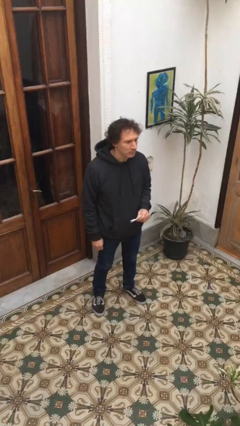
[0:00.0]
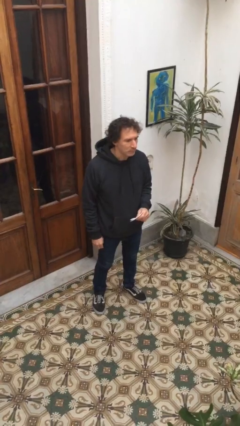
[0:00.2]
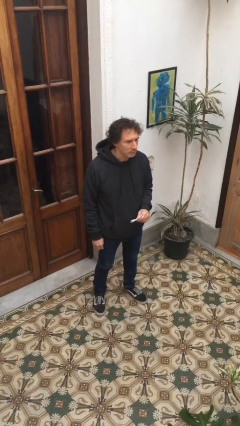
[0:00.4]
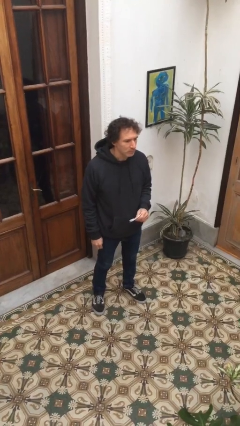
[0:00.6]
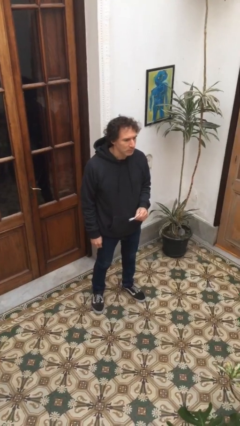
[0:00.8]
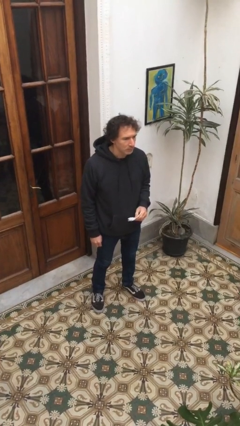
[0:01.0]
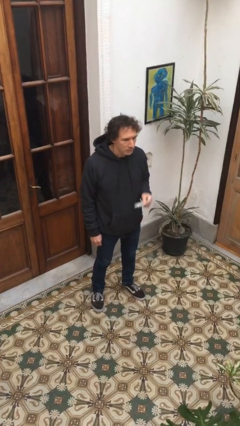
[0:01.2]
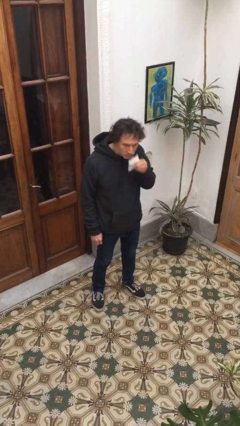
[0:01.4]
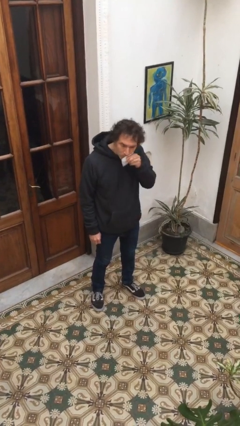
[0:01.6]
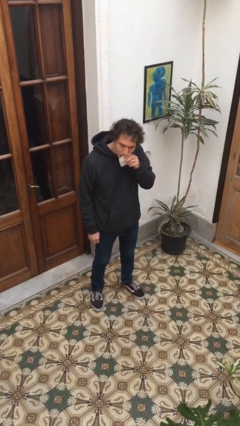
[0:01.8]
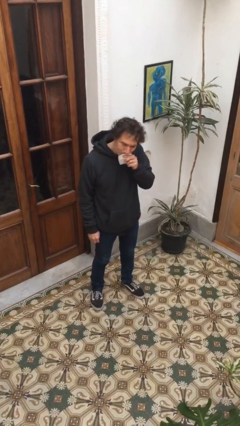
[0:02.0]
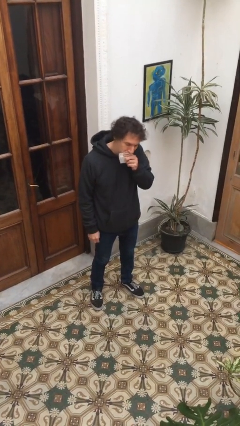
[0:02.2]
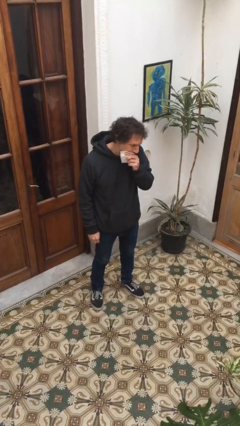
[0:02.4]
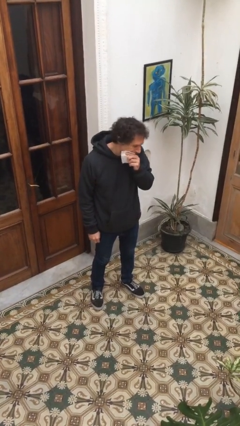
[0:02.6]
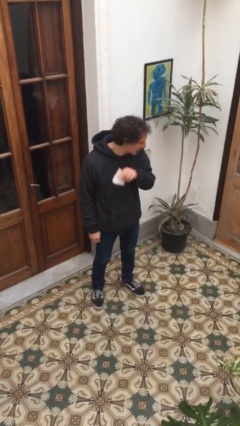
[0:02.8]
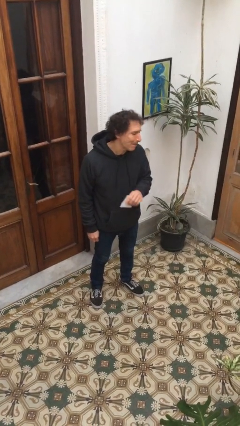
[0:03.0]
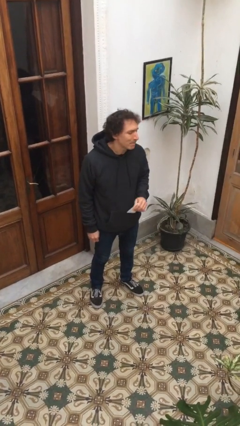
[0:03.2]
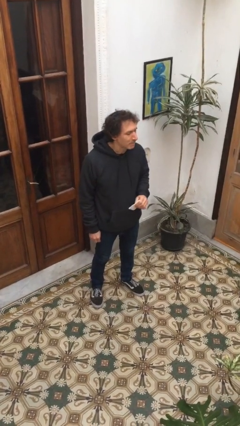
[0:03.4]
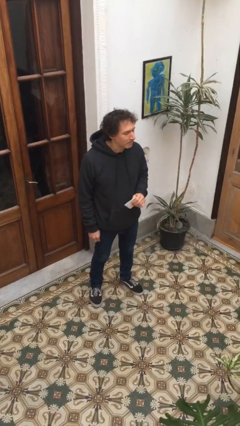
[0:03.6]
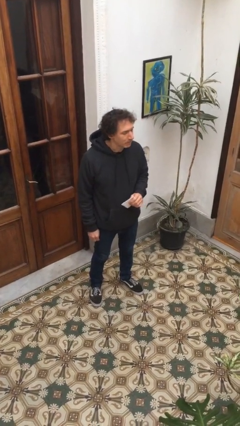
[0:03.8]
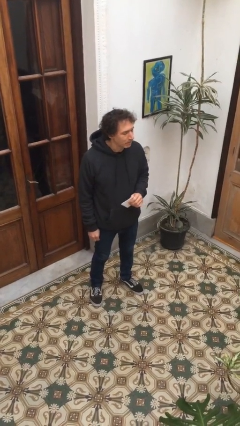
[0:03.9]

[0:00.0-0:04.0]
person wipes mouth with napkin

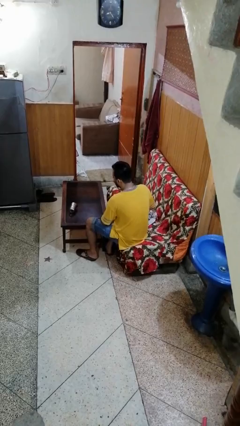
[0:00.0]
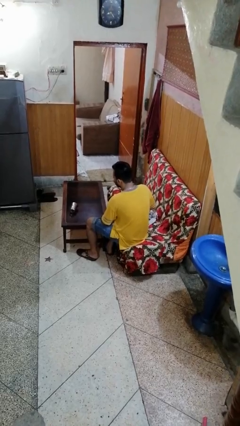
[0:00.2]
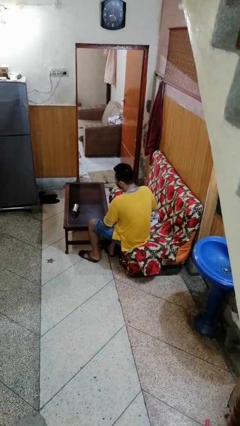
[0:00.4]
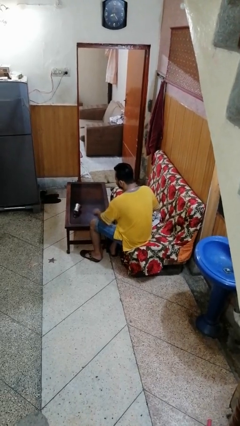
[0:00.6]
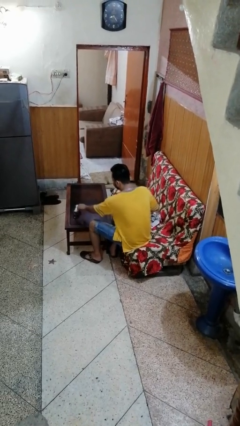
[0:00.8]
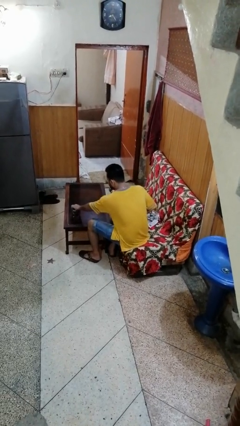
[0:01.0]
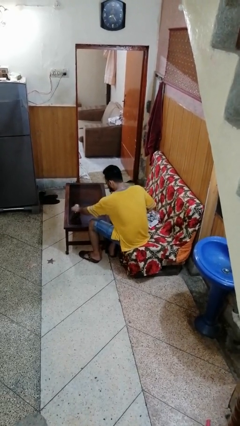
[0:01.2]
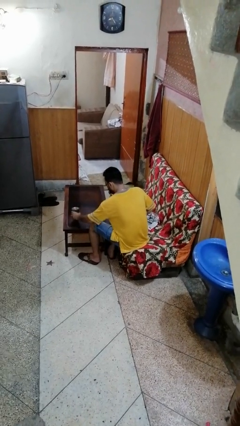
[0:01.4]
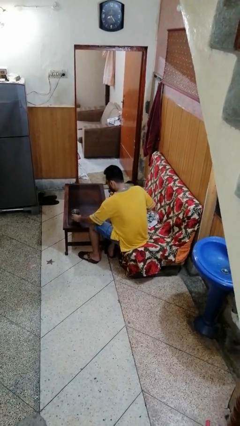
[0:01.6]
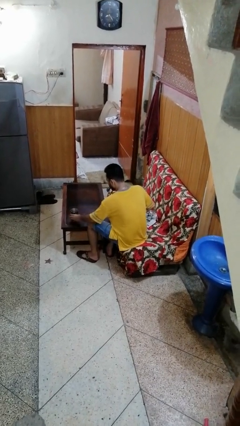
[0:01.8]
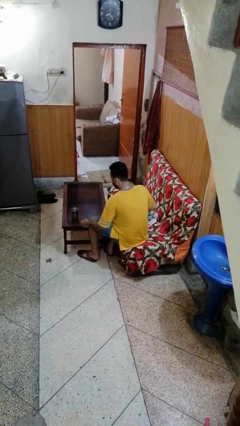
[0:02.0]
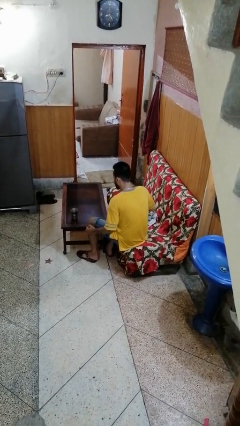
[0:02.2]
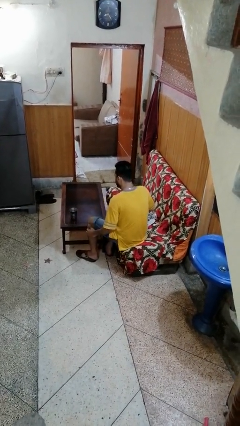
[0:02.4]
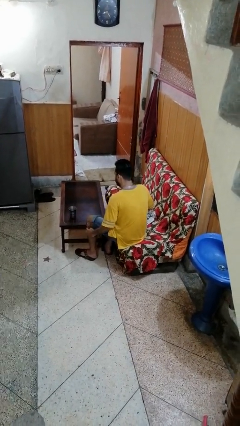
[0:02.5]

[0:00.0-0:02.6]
person sets upright glass

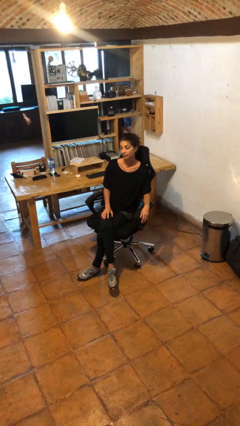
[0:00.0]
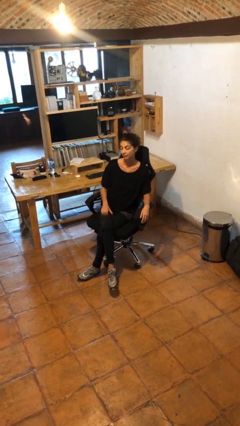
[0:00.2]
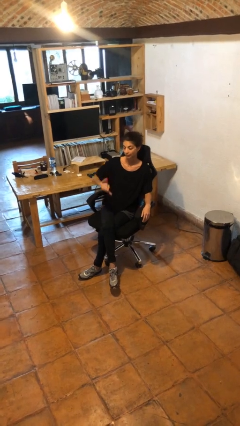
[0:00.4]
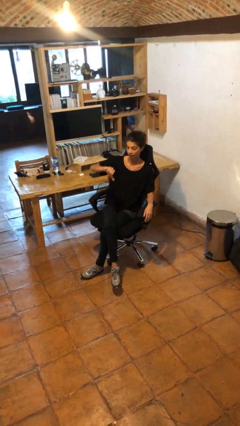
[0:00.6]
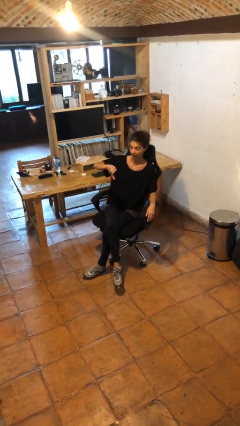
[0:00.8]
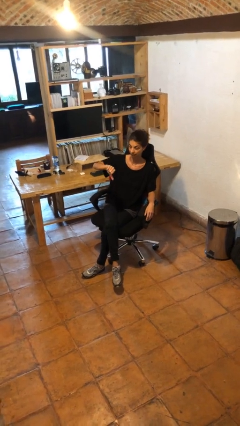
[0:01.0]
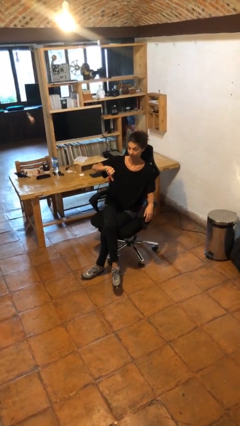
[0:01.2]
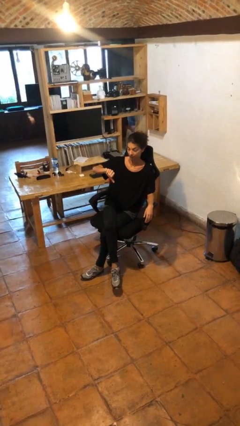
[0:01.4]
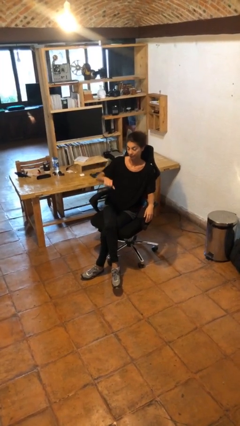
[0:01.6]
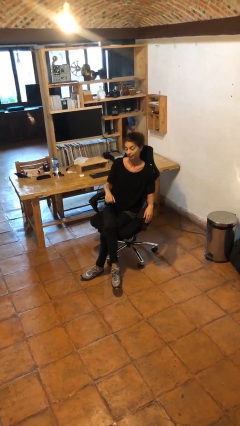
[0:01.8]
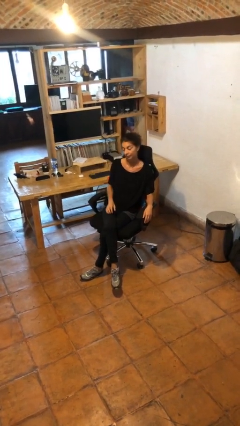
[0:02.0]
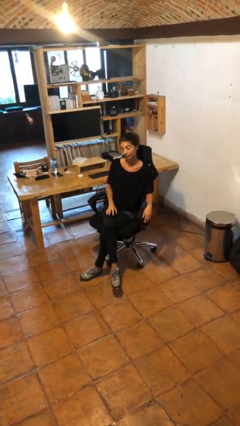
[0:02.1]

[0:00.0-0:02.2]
person gestures thumbs down

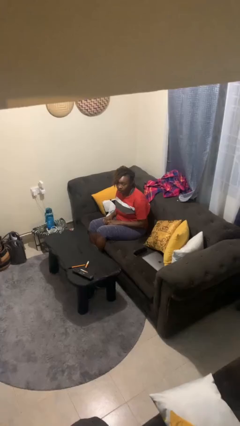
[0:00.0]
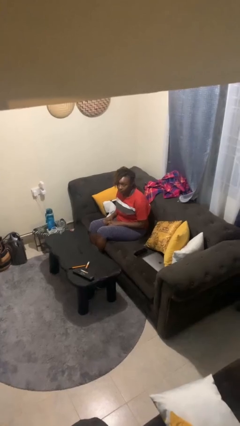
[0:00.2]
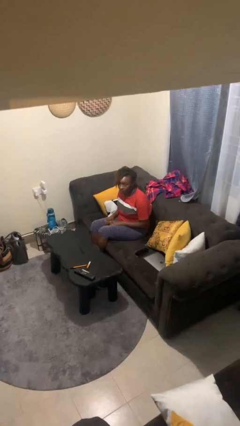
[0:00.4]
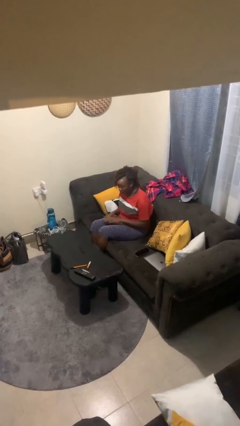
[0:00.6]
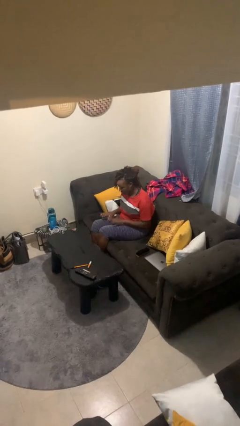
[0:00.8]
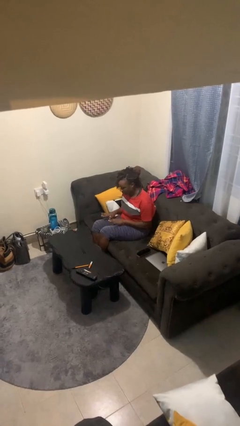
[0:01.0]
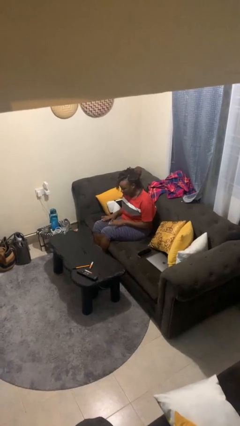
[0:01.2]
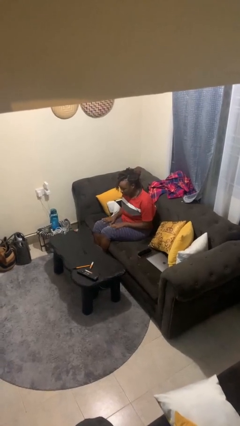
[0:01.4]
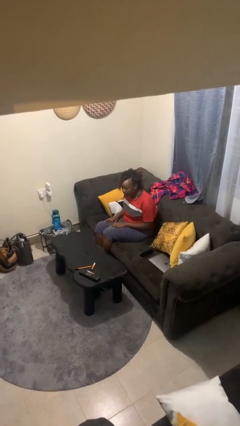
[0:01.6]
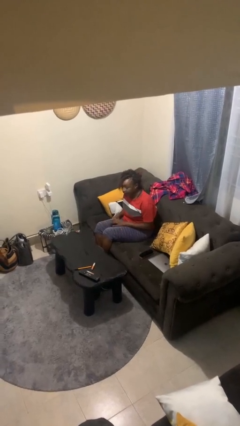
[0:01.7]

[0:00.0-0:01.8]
person slaps hands on thighs

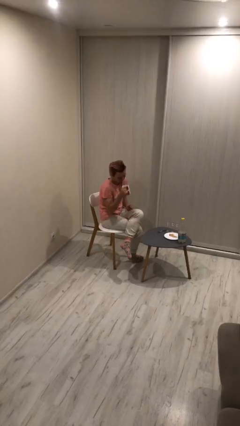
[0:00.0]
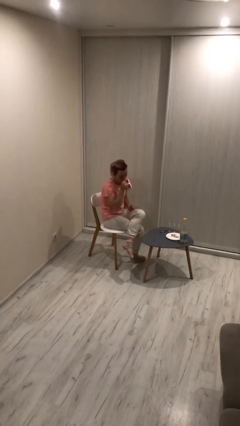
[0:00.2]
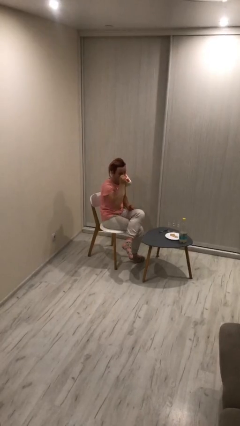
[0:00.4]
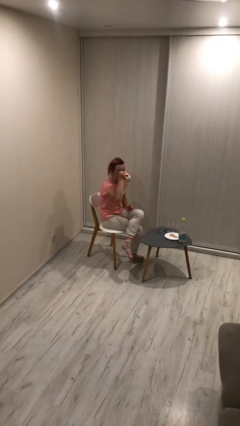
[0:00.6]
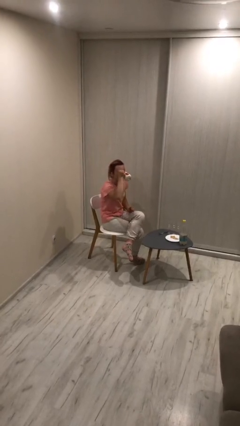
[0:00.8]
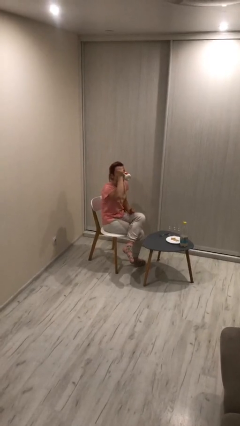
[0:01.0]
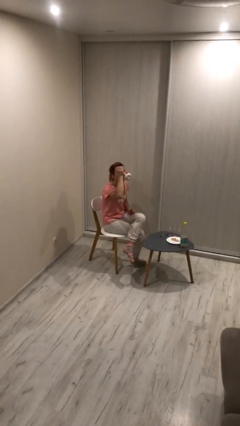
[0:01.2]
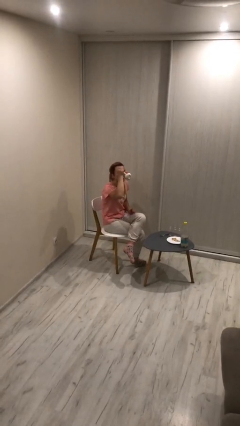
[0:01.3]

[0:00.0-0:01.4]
person drinks from mug

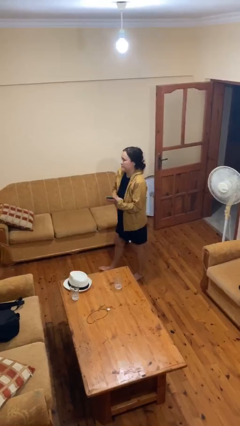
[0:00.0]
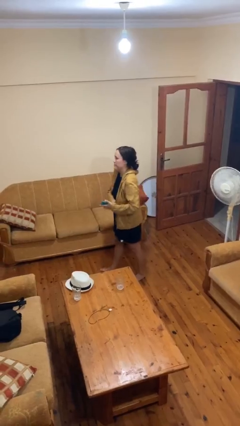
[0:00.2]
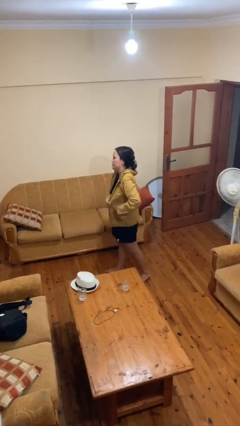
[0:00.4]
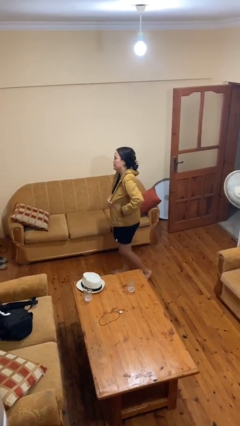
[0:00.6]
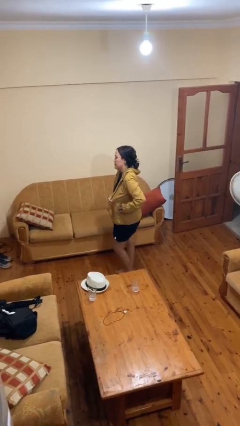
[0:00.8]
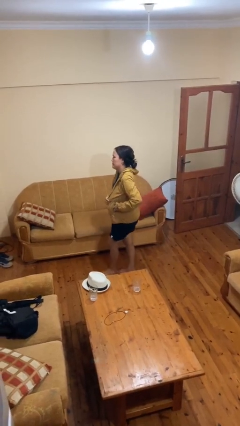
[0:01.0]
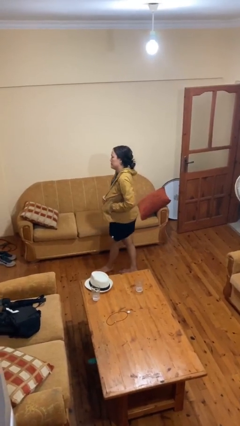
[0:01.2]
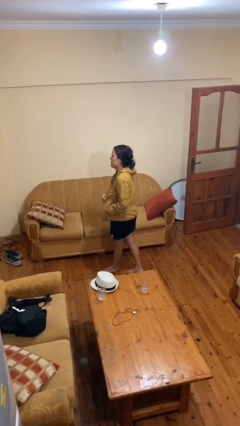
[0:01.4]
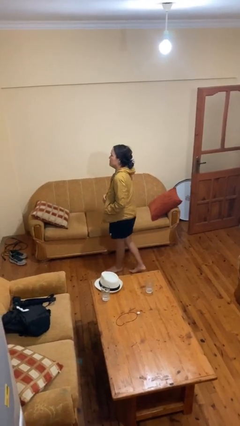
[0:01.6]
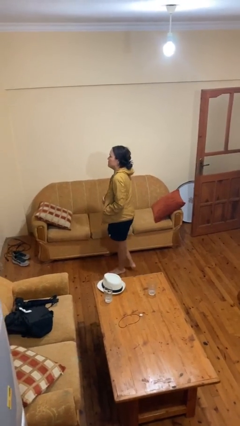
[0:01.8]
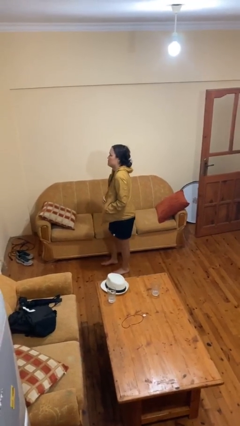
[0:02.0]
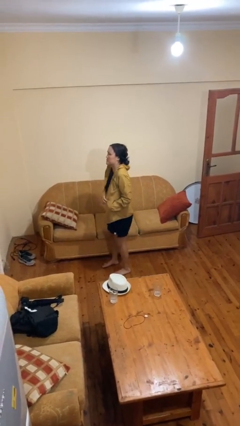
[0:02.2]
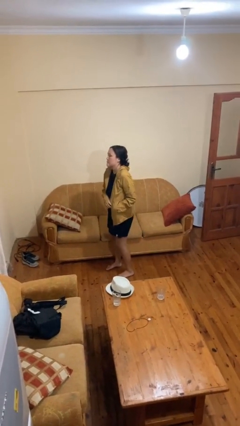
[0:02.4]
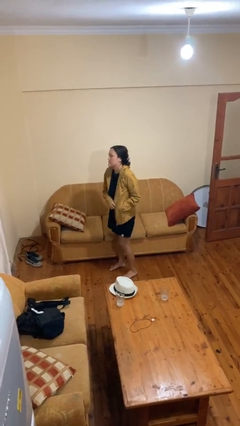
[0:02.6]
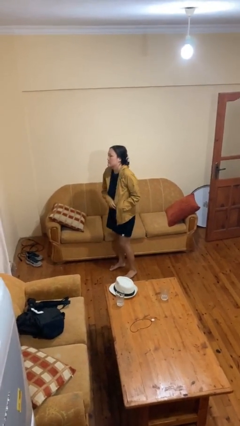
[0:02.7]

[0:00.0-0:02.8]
person puts phone into pocket

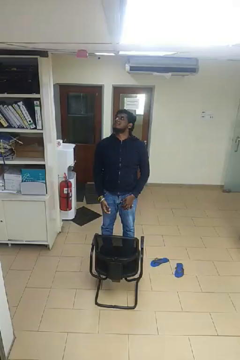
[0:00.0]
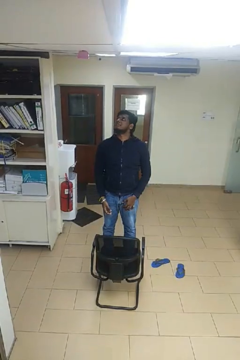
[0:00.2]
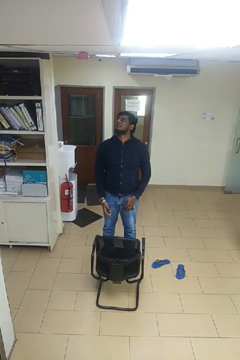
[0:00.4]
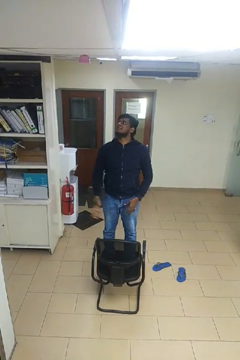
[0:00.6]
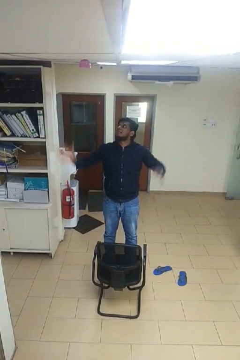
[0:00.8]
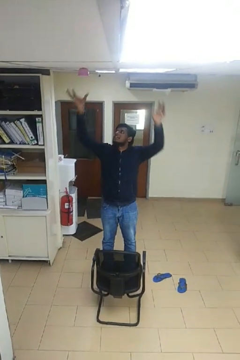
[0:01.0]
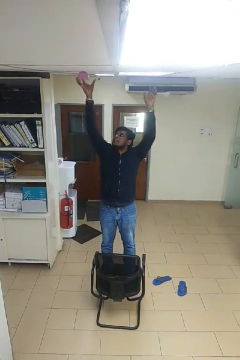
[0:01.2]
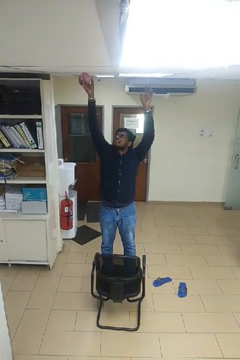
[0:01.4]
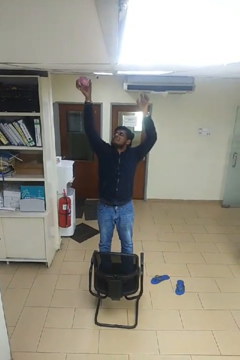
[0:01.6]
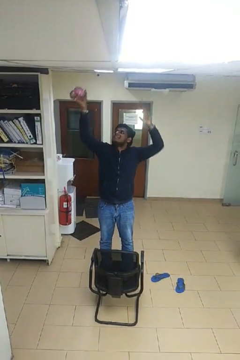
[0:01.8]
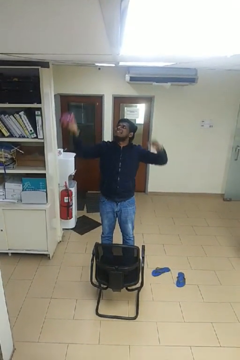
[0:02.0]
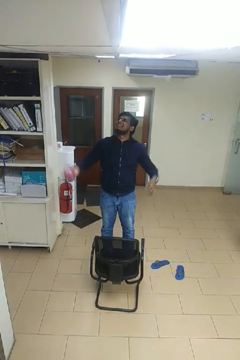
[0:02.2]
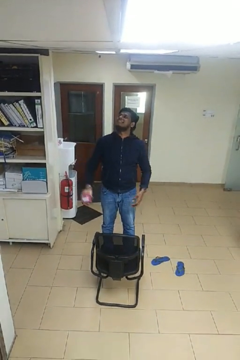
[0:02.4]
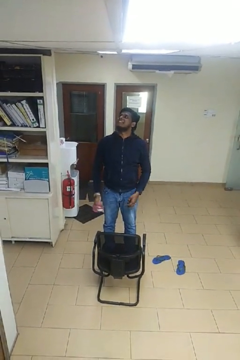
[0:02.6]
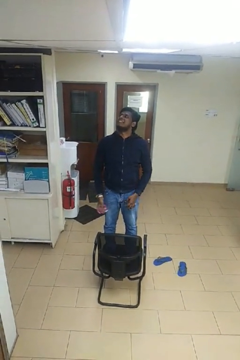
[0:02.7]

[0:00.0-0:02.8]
person takes down smoke detector
